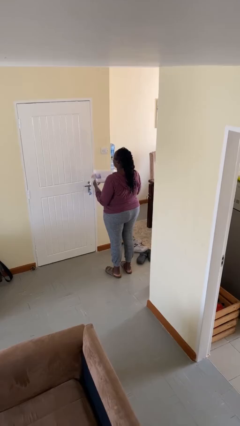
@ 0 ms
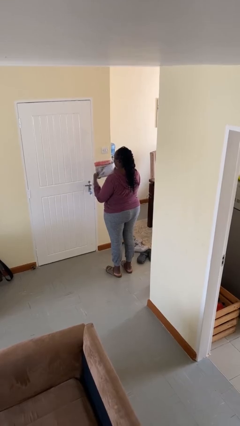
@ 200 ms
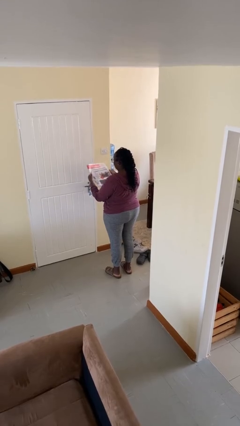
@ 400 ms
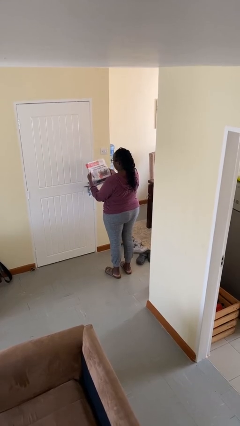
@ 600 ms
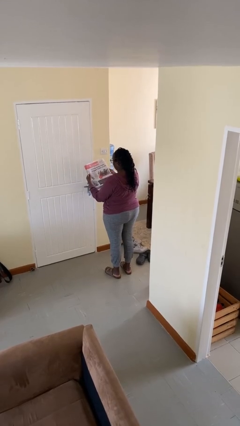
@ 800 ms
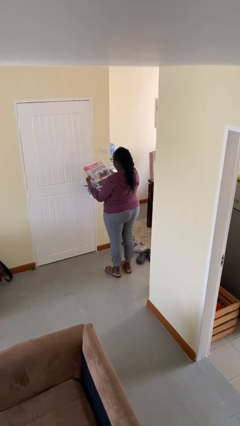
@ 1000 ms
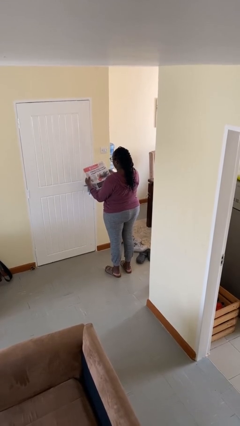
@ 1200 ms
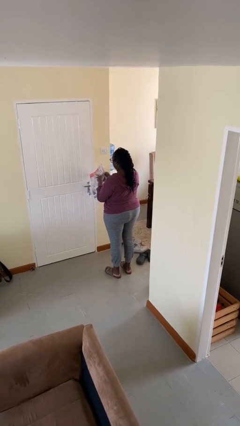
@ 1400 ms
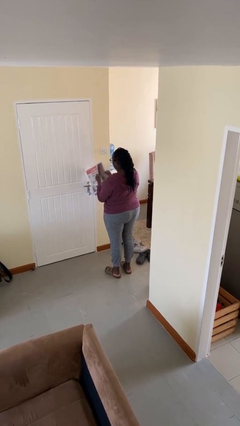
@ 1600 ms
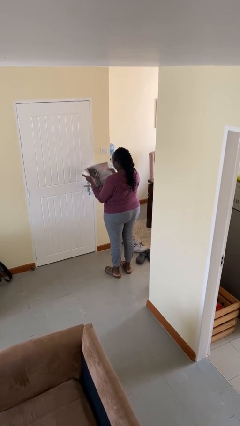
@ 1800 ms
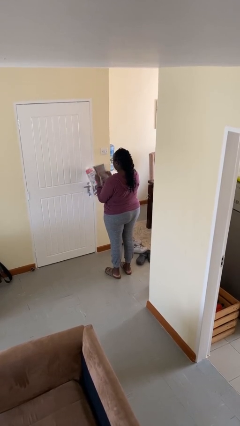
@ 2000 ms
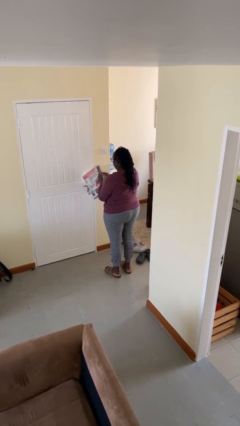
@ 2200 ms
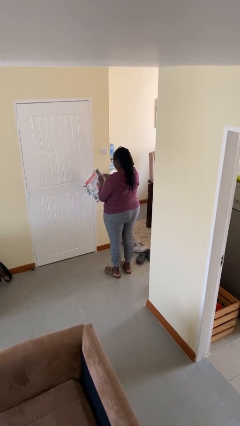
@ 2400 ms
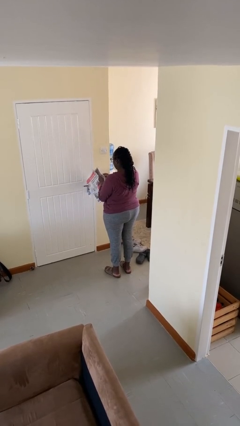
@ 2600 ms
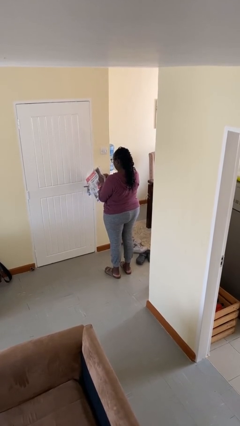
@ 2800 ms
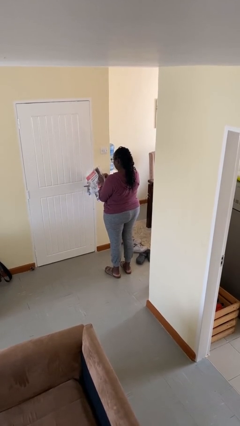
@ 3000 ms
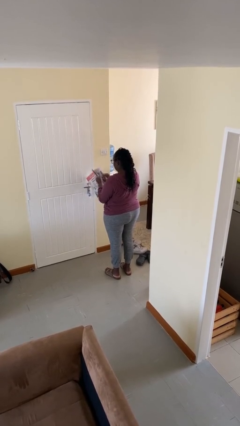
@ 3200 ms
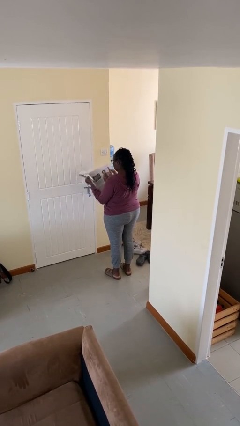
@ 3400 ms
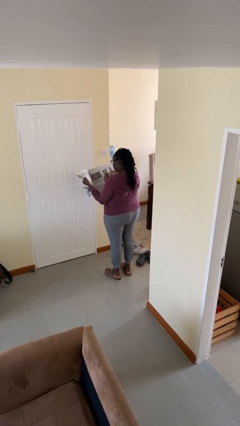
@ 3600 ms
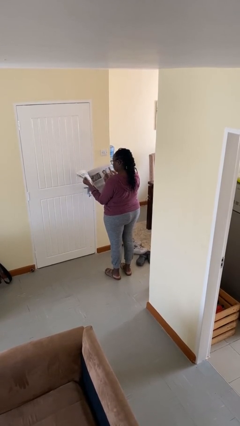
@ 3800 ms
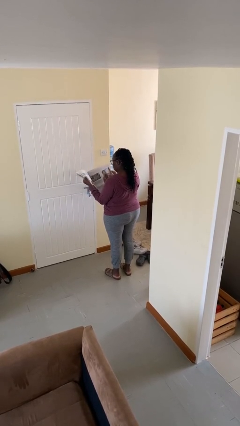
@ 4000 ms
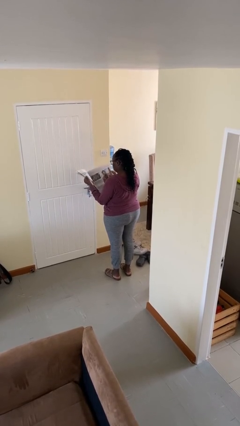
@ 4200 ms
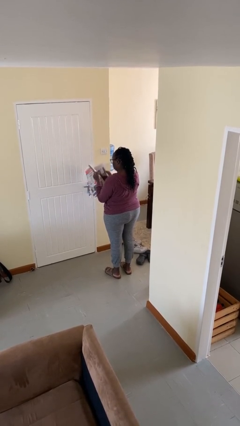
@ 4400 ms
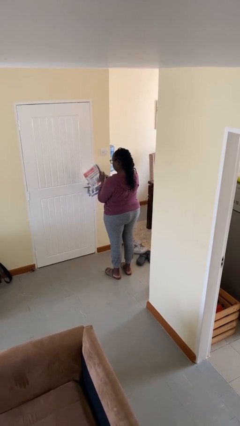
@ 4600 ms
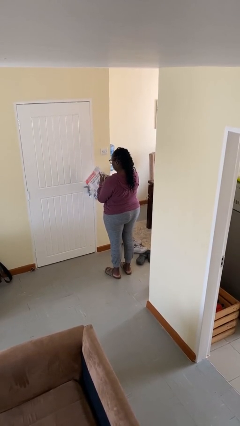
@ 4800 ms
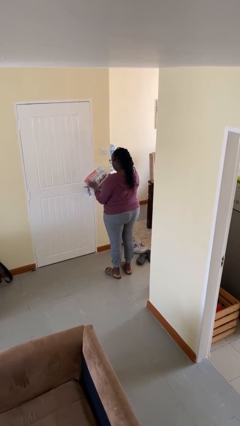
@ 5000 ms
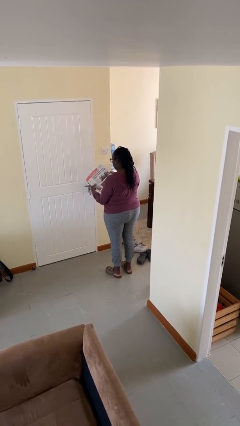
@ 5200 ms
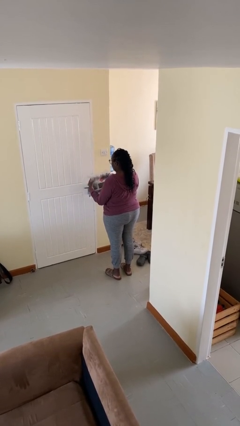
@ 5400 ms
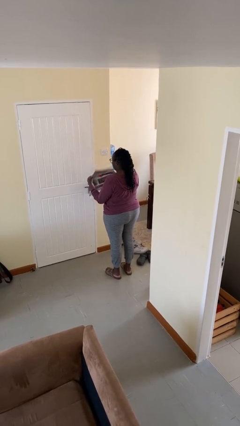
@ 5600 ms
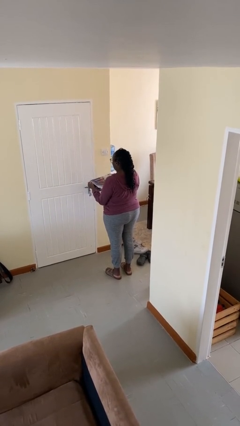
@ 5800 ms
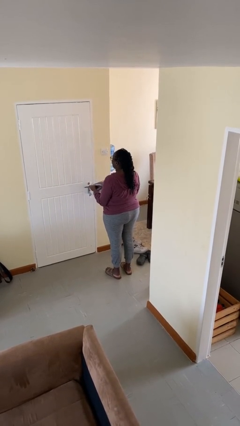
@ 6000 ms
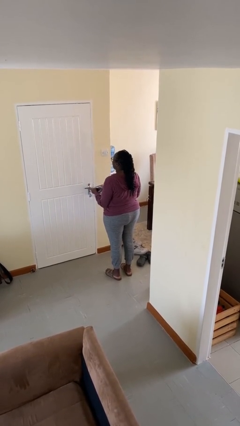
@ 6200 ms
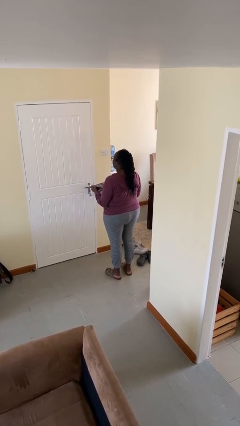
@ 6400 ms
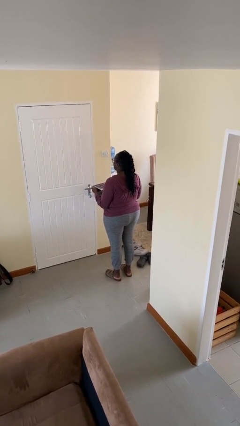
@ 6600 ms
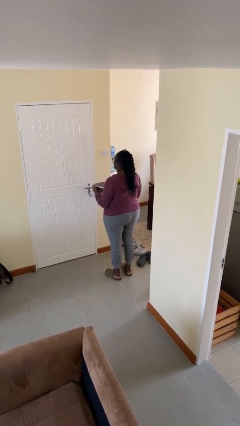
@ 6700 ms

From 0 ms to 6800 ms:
person reads newspaper

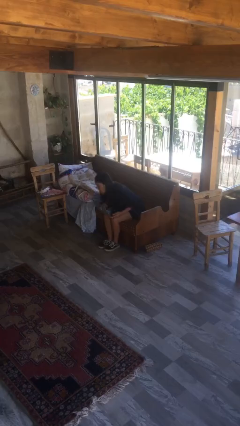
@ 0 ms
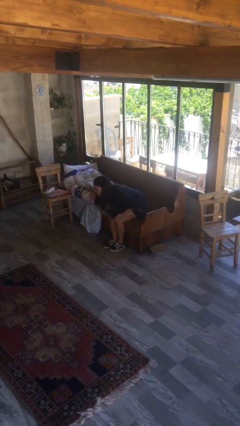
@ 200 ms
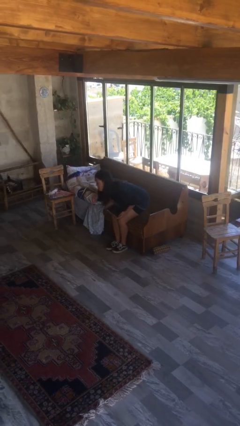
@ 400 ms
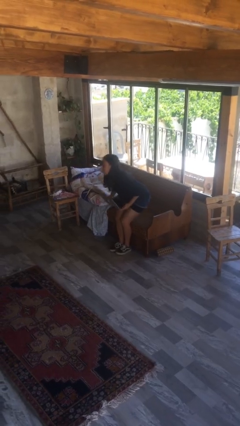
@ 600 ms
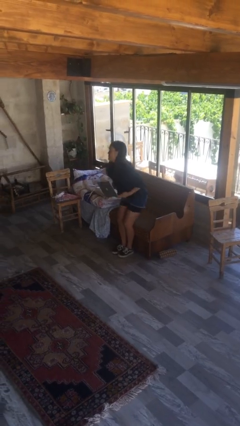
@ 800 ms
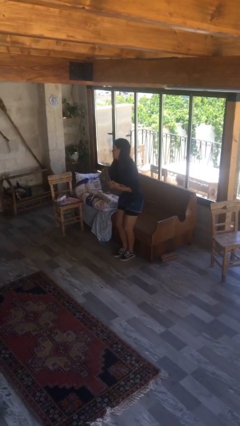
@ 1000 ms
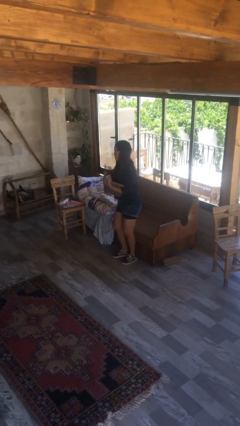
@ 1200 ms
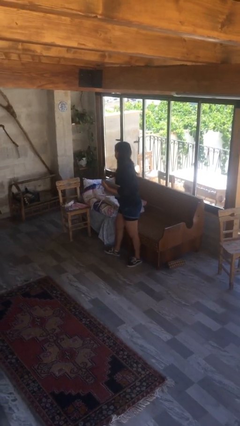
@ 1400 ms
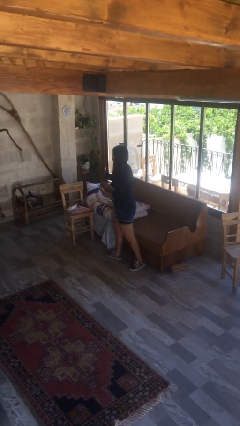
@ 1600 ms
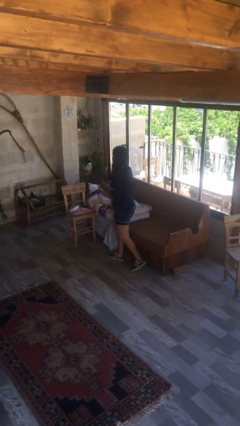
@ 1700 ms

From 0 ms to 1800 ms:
person stands up

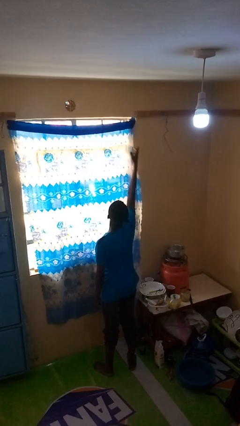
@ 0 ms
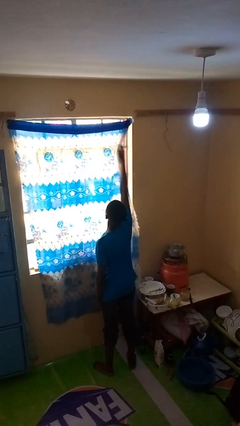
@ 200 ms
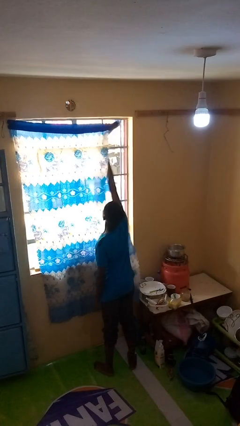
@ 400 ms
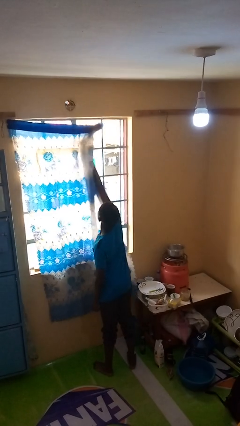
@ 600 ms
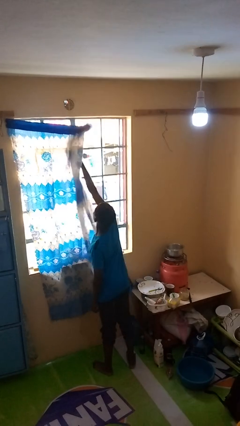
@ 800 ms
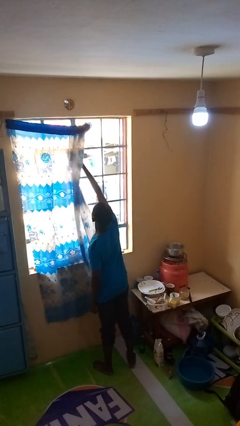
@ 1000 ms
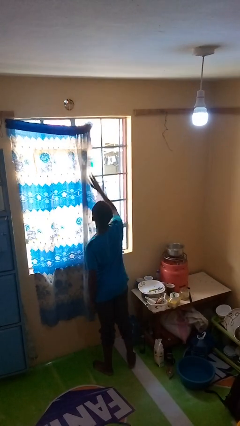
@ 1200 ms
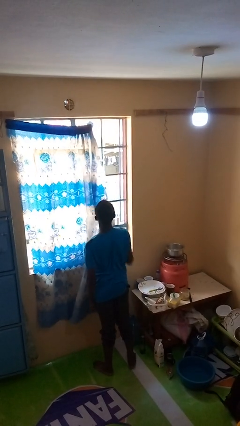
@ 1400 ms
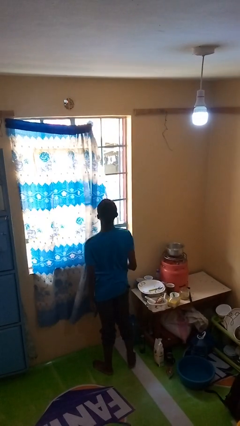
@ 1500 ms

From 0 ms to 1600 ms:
person opens curtains

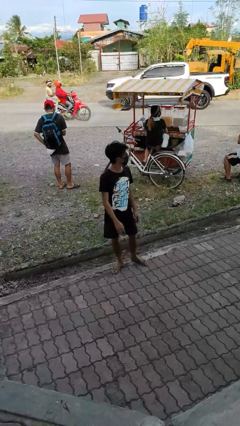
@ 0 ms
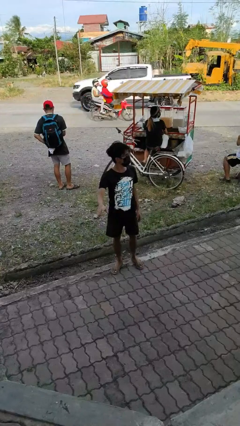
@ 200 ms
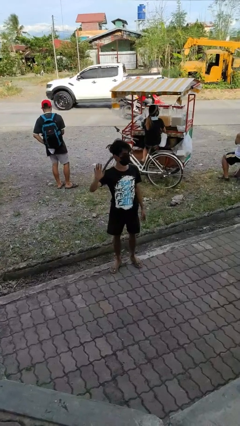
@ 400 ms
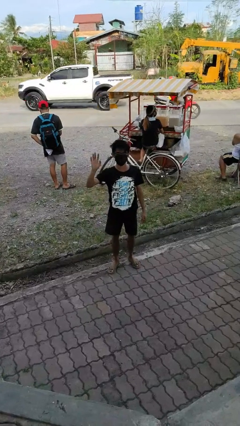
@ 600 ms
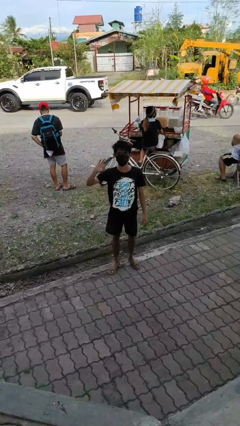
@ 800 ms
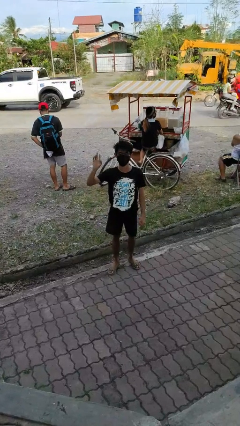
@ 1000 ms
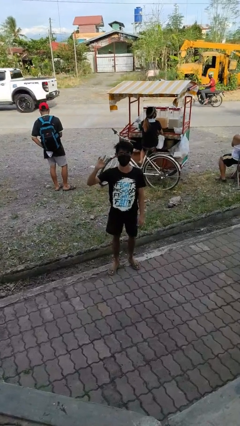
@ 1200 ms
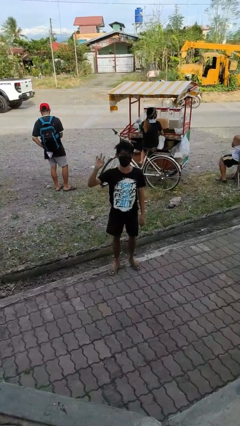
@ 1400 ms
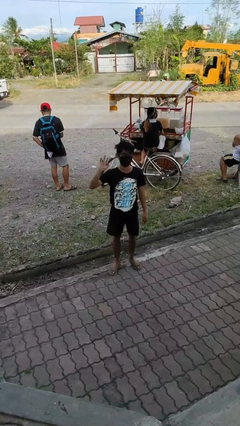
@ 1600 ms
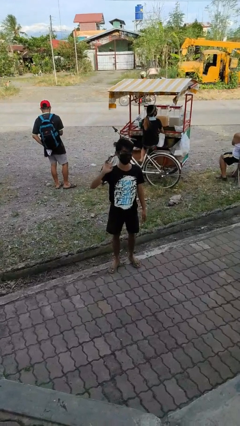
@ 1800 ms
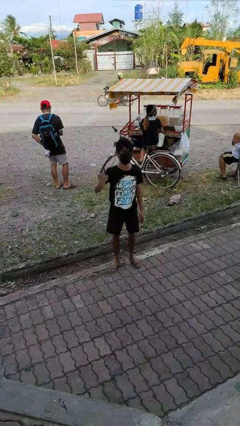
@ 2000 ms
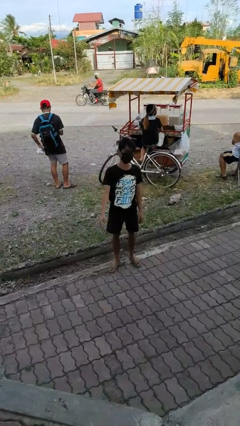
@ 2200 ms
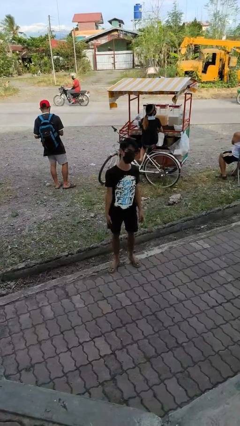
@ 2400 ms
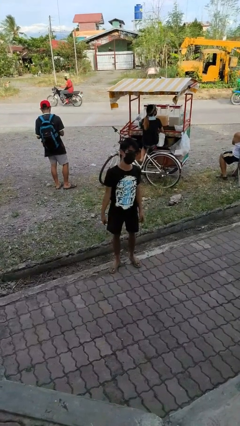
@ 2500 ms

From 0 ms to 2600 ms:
person waves at person

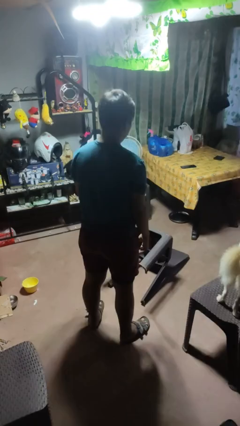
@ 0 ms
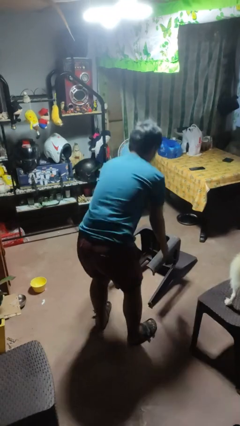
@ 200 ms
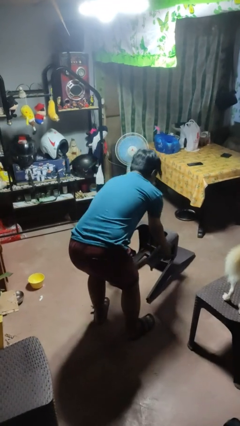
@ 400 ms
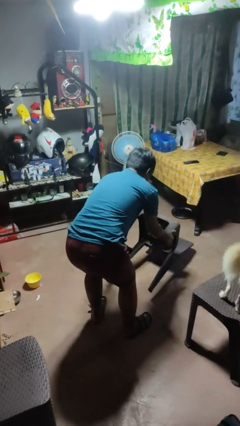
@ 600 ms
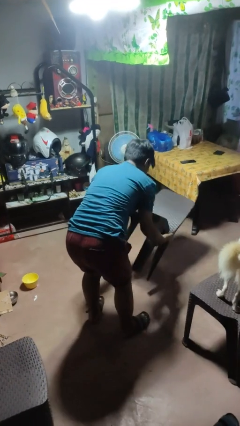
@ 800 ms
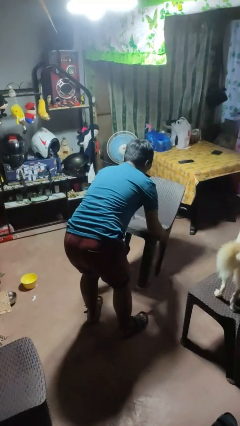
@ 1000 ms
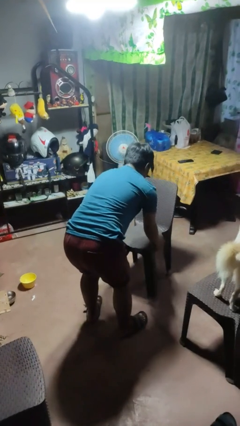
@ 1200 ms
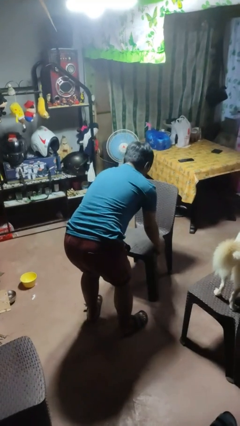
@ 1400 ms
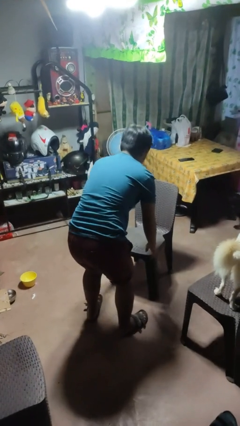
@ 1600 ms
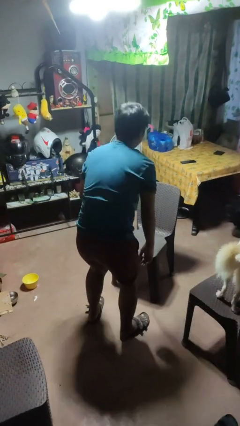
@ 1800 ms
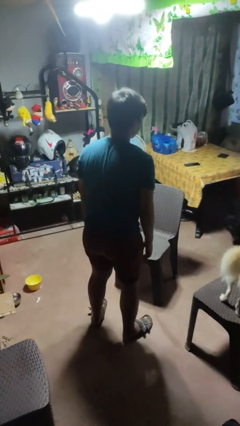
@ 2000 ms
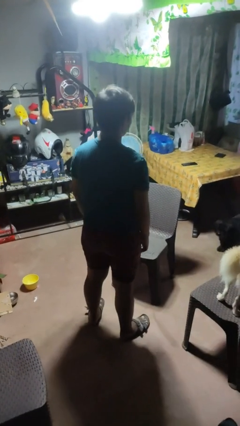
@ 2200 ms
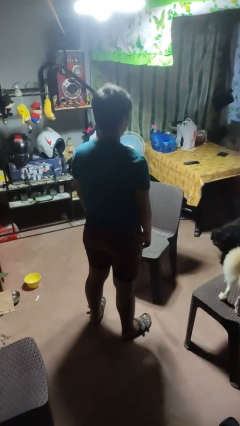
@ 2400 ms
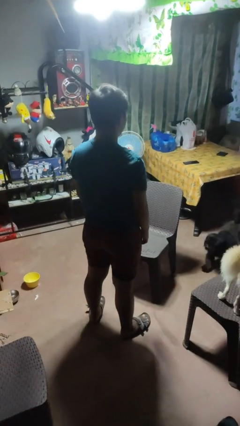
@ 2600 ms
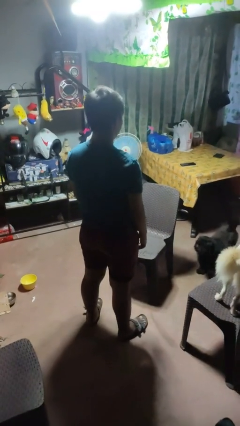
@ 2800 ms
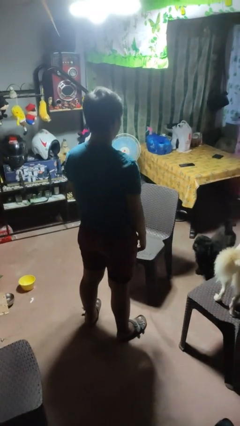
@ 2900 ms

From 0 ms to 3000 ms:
person sets upright furniture

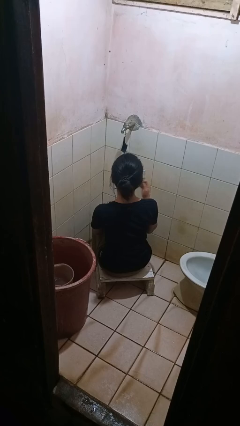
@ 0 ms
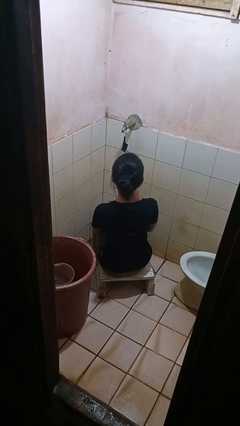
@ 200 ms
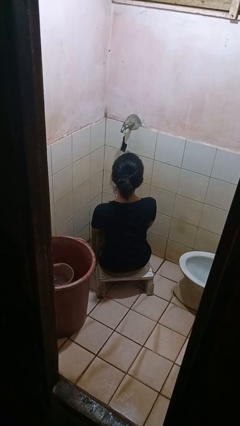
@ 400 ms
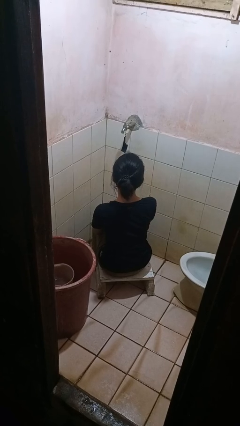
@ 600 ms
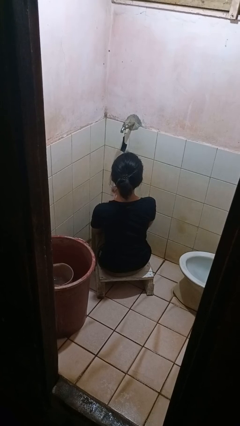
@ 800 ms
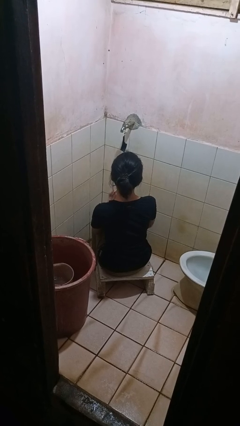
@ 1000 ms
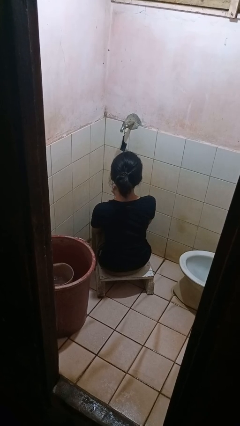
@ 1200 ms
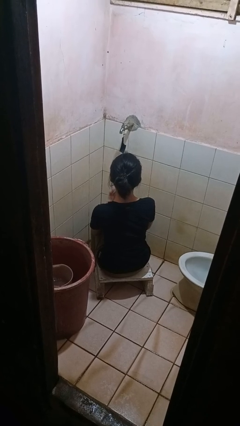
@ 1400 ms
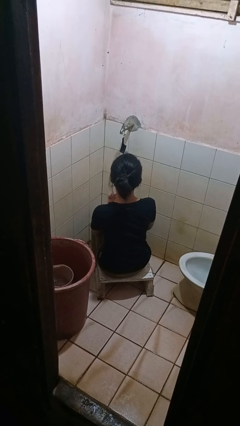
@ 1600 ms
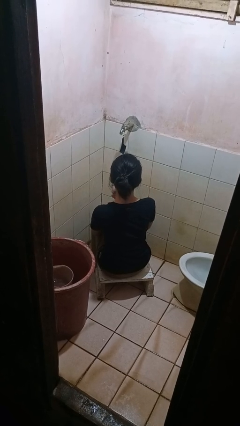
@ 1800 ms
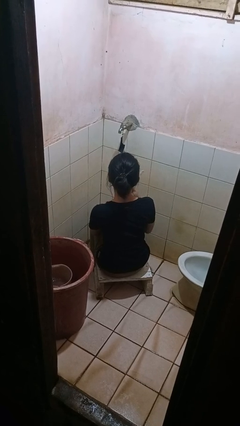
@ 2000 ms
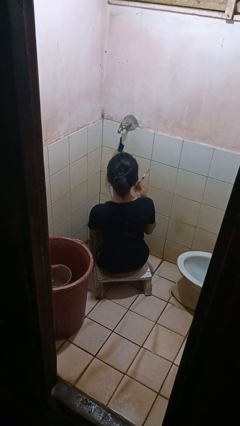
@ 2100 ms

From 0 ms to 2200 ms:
person brushes teeth
